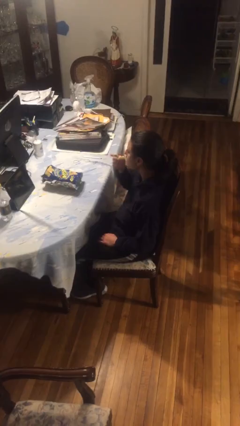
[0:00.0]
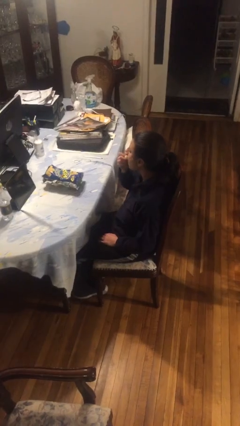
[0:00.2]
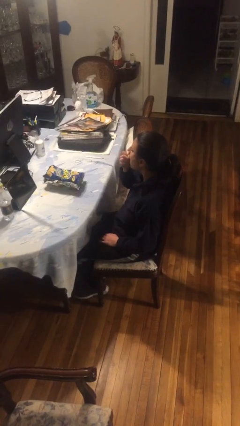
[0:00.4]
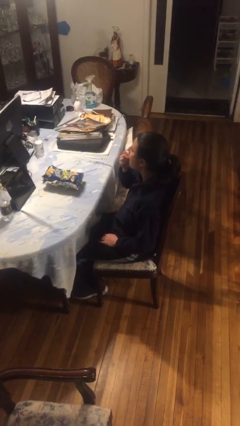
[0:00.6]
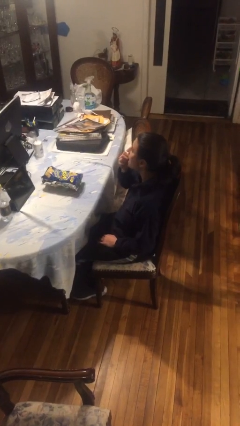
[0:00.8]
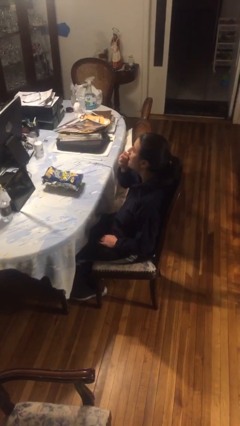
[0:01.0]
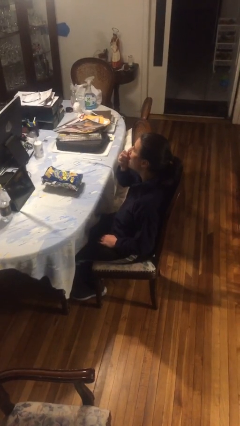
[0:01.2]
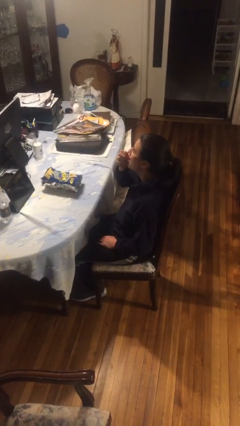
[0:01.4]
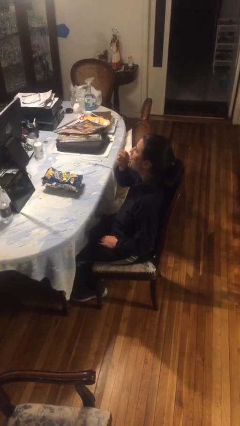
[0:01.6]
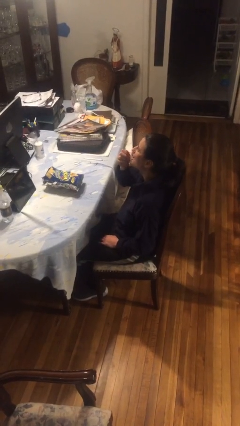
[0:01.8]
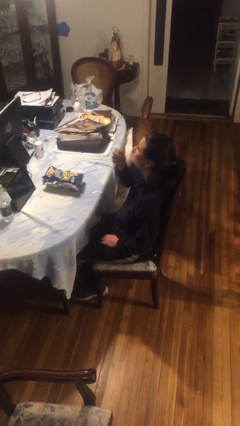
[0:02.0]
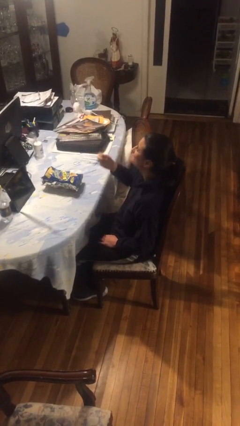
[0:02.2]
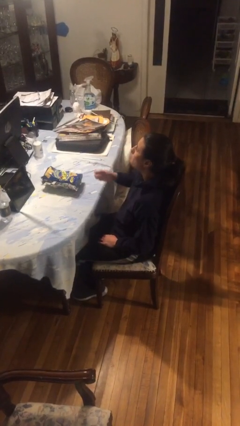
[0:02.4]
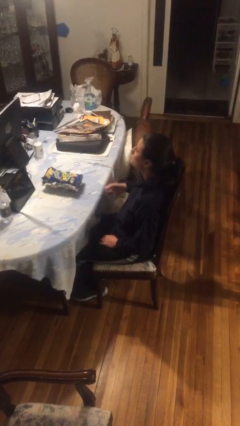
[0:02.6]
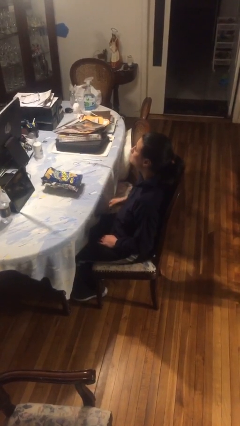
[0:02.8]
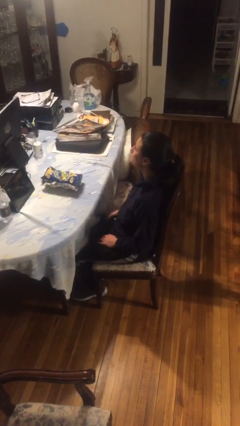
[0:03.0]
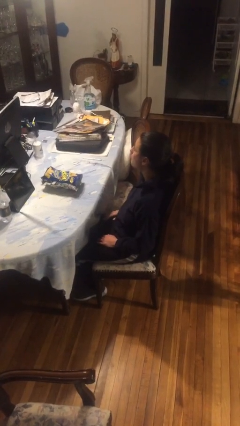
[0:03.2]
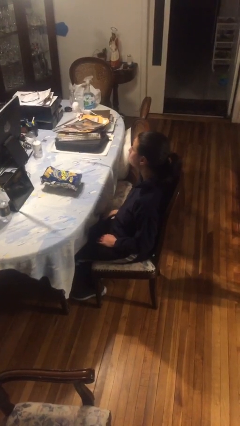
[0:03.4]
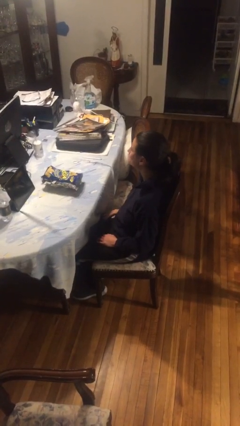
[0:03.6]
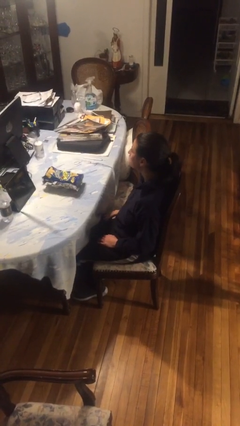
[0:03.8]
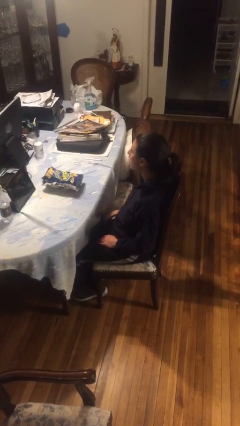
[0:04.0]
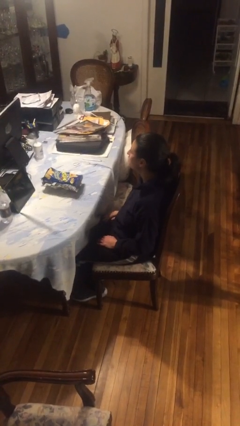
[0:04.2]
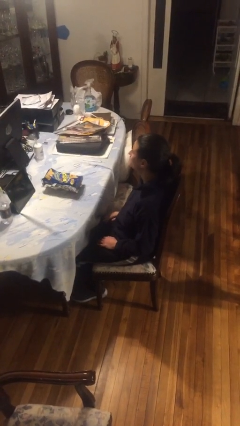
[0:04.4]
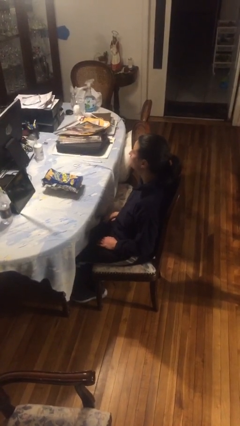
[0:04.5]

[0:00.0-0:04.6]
person eats snack from bag

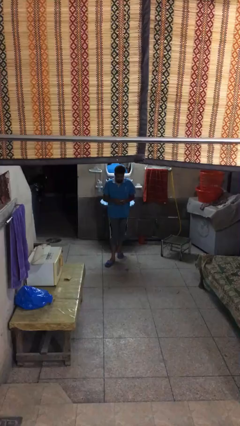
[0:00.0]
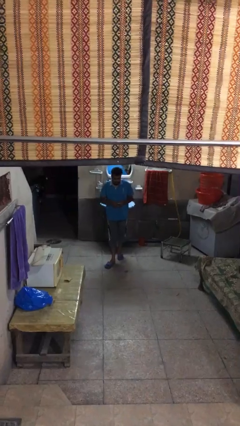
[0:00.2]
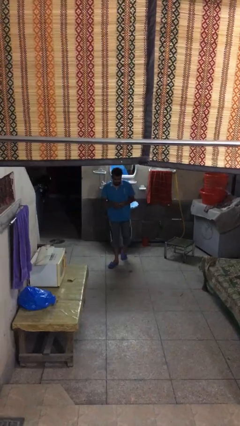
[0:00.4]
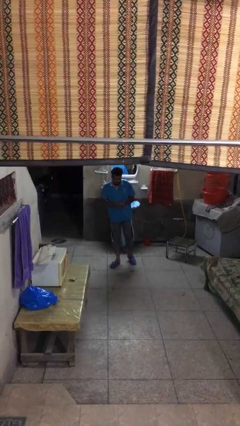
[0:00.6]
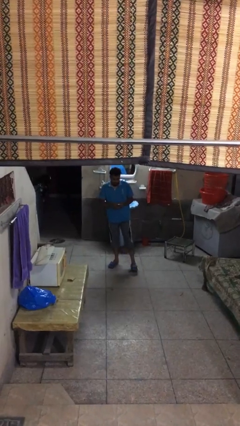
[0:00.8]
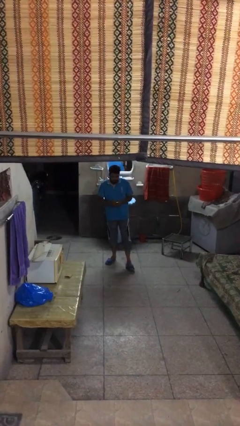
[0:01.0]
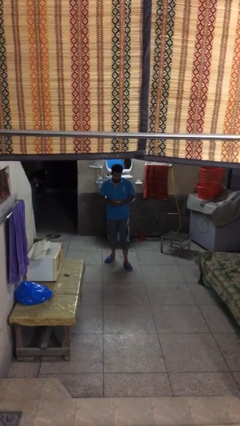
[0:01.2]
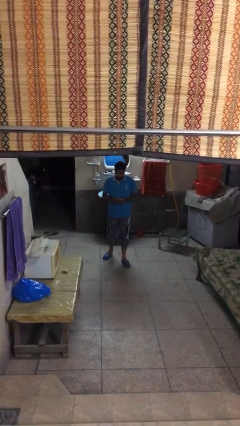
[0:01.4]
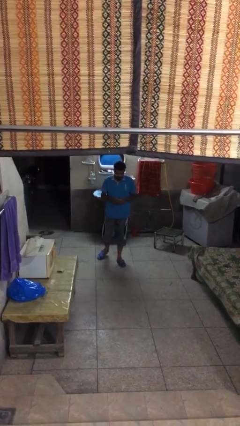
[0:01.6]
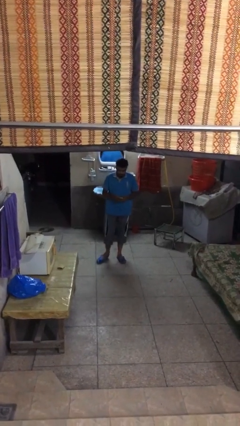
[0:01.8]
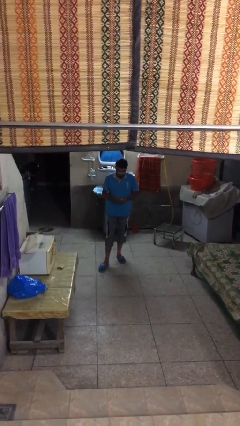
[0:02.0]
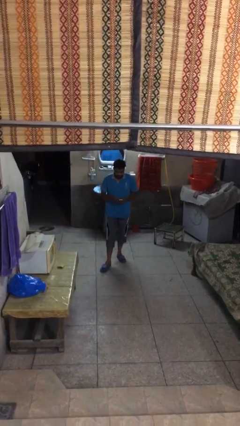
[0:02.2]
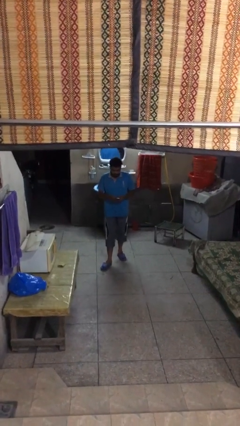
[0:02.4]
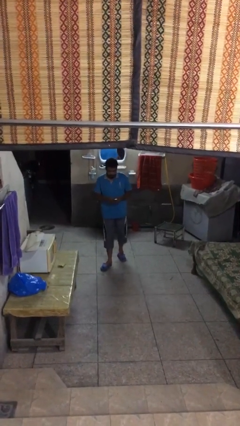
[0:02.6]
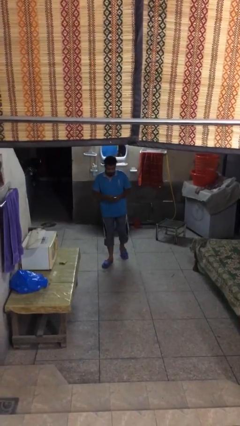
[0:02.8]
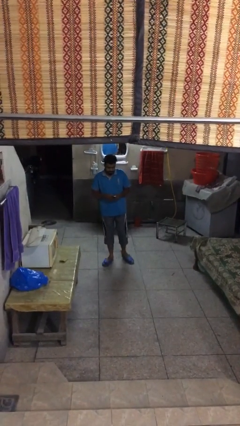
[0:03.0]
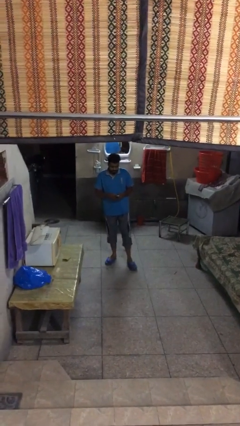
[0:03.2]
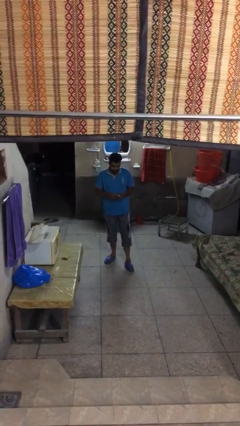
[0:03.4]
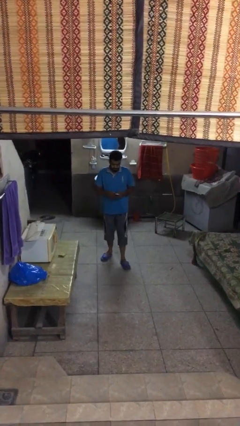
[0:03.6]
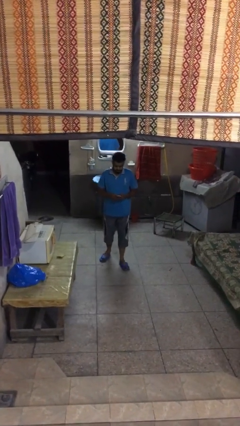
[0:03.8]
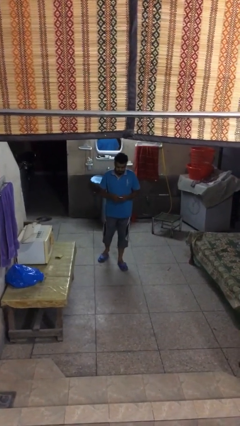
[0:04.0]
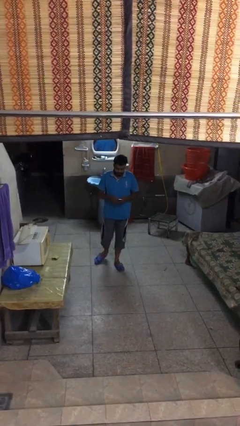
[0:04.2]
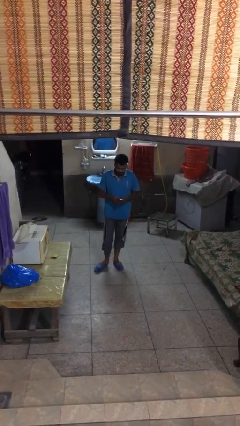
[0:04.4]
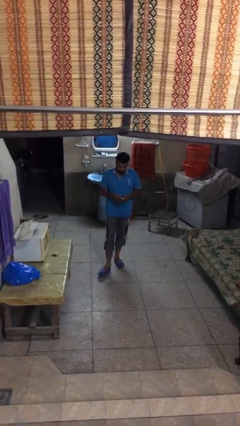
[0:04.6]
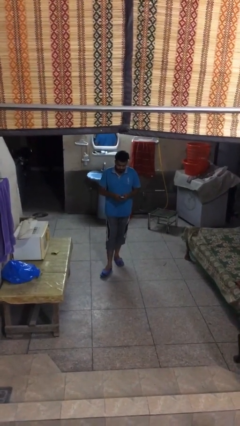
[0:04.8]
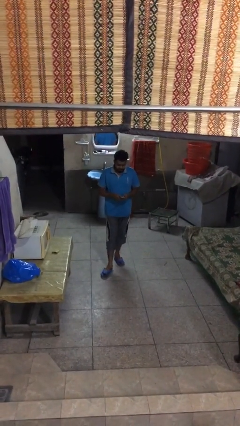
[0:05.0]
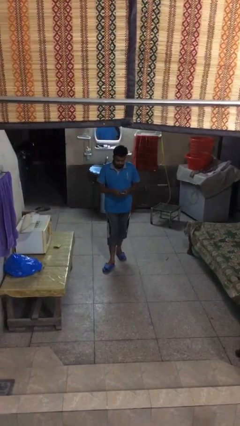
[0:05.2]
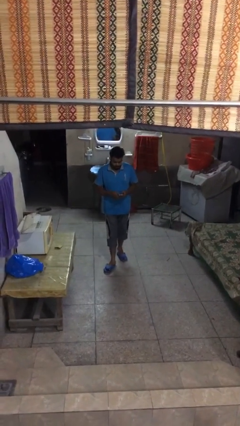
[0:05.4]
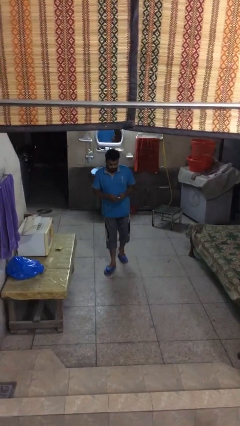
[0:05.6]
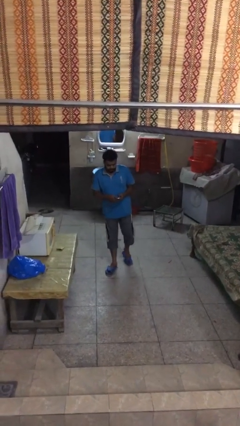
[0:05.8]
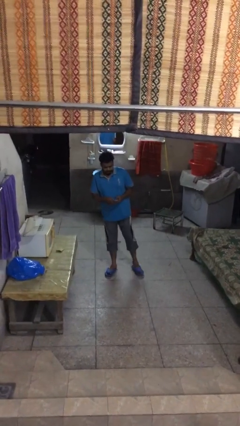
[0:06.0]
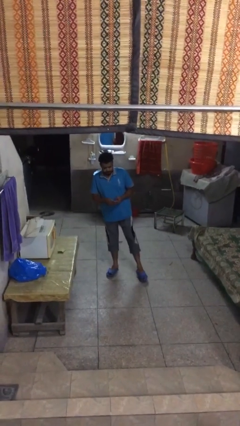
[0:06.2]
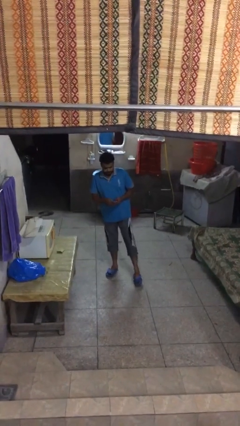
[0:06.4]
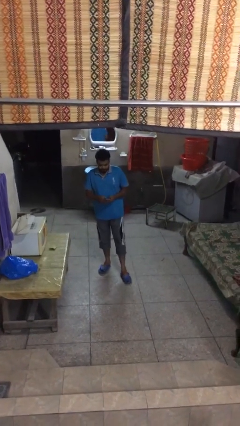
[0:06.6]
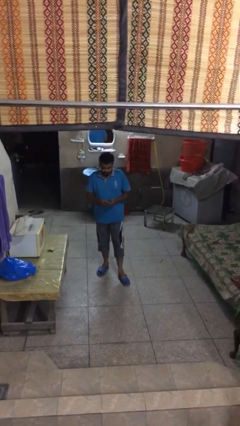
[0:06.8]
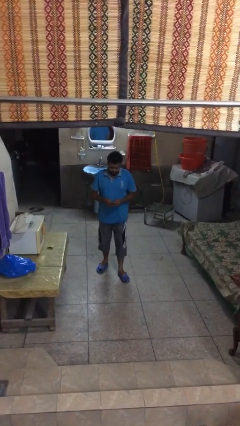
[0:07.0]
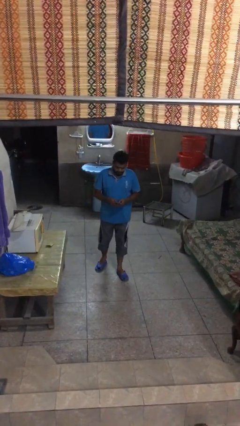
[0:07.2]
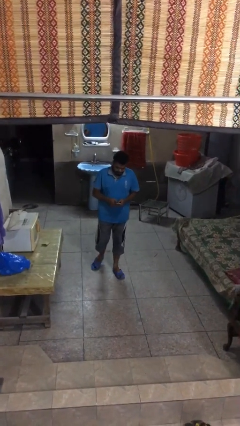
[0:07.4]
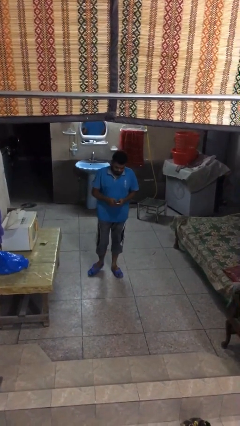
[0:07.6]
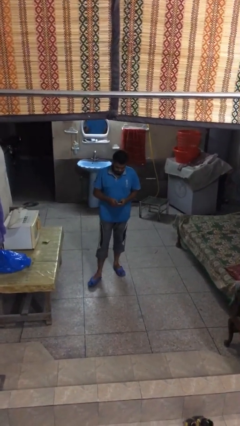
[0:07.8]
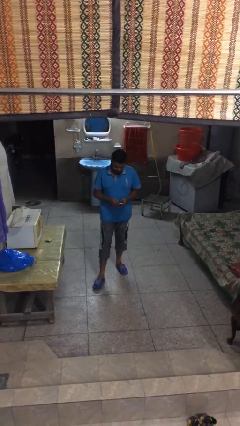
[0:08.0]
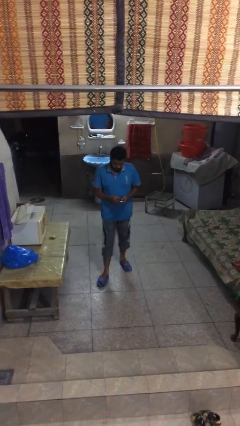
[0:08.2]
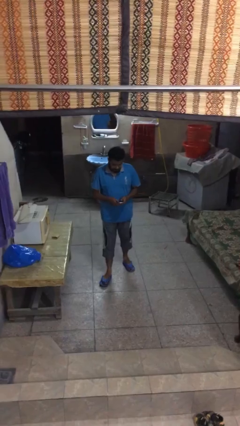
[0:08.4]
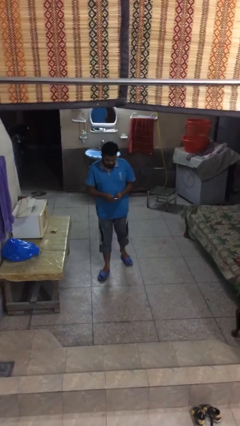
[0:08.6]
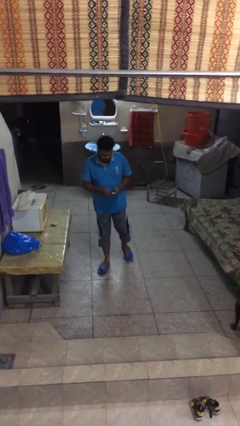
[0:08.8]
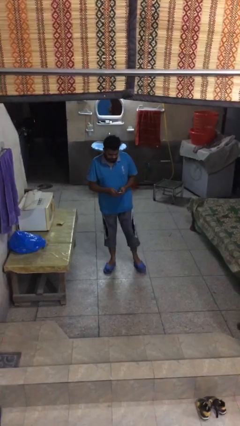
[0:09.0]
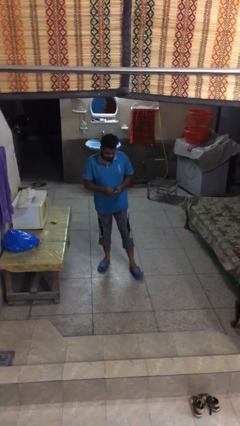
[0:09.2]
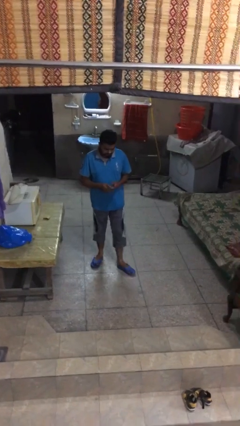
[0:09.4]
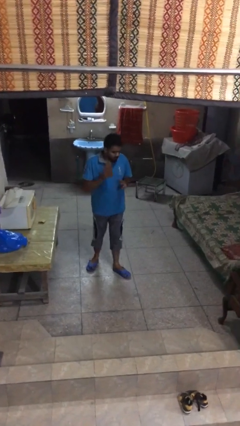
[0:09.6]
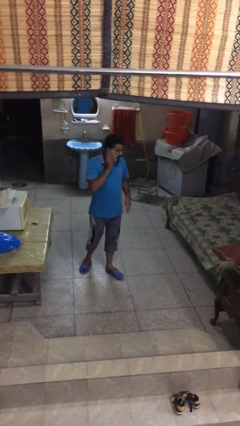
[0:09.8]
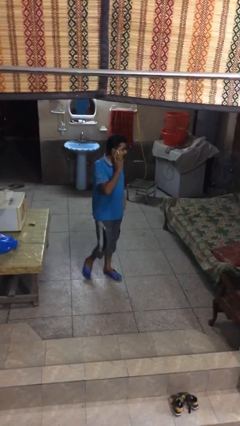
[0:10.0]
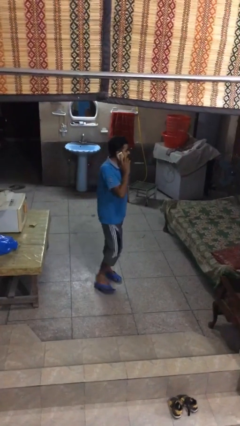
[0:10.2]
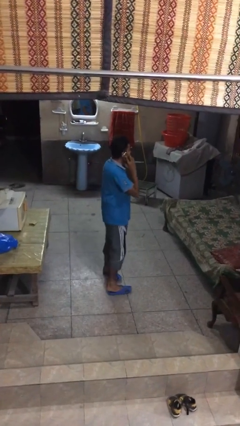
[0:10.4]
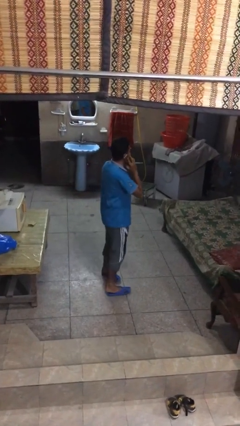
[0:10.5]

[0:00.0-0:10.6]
person texts on phone

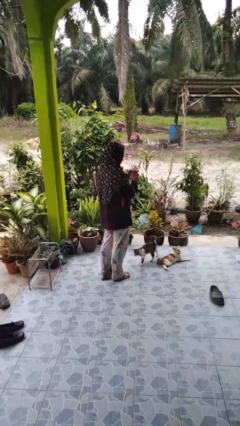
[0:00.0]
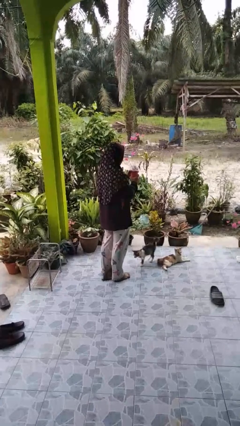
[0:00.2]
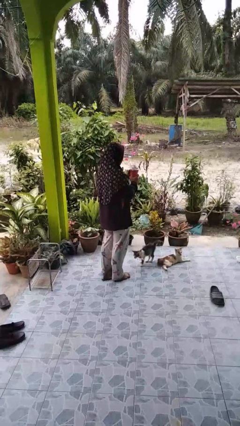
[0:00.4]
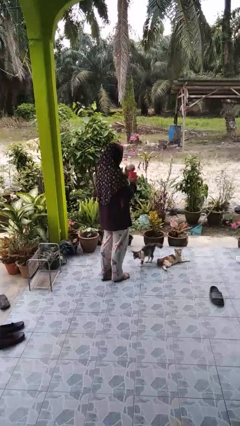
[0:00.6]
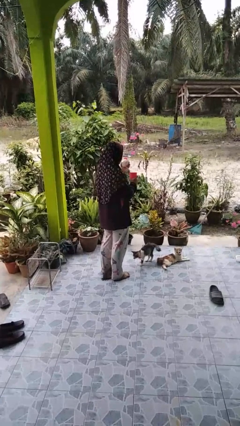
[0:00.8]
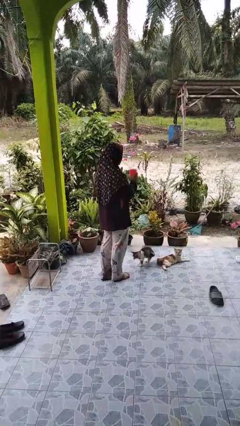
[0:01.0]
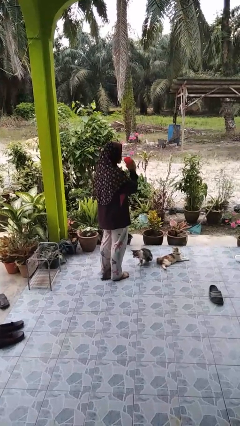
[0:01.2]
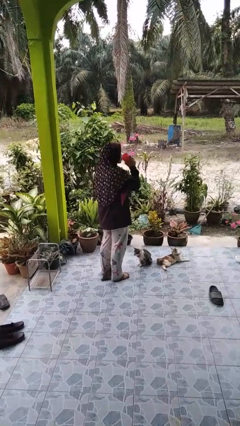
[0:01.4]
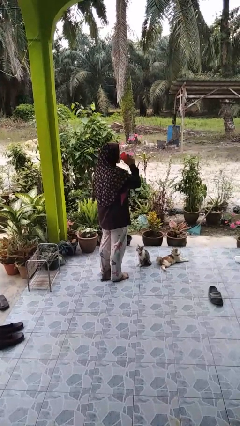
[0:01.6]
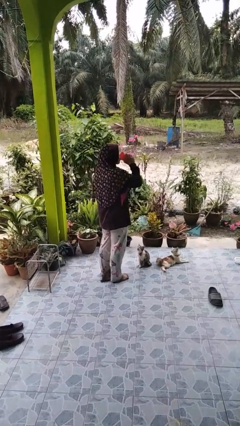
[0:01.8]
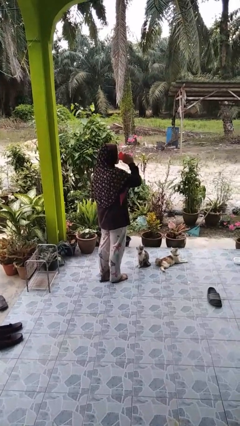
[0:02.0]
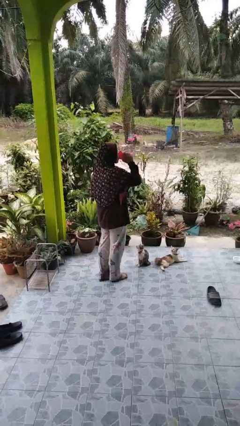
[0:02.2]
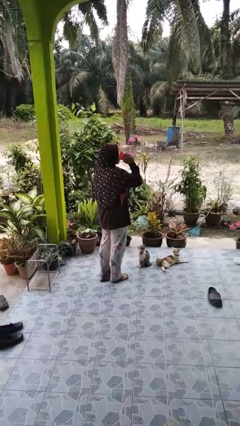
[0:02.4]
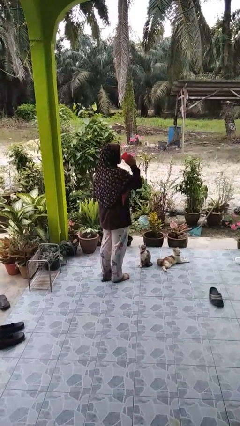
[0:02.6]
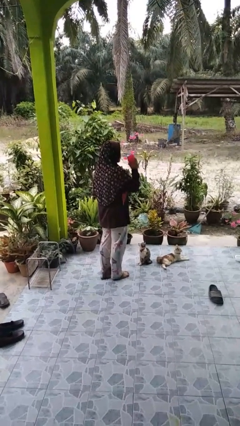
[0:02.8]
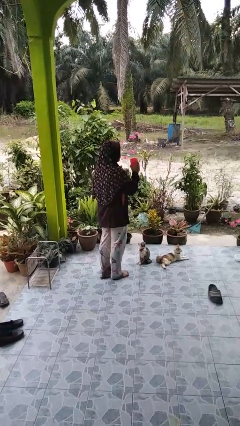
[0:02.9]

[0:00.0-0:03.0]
person drinks from bottle
